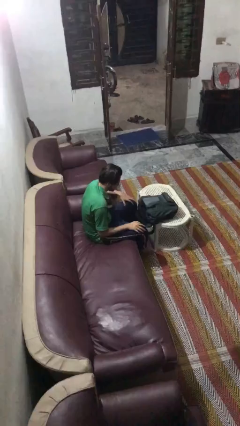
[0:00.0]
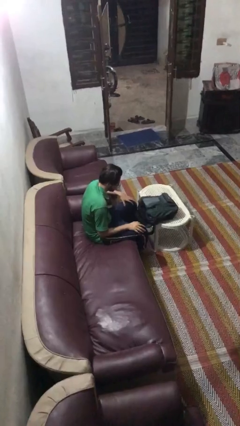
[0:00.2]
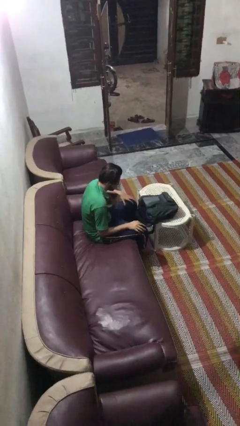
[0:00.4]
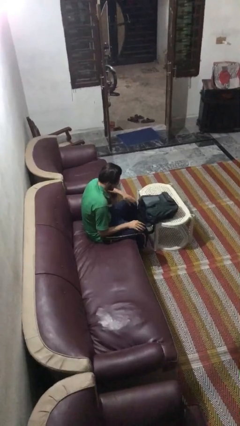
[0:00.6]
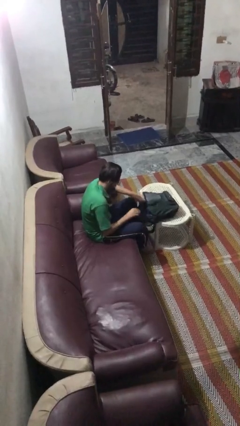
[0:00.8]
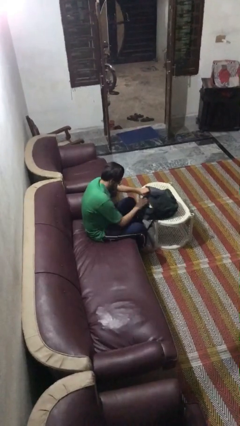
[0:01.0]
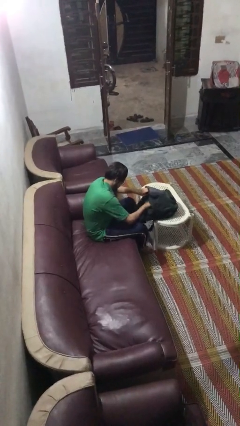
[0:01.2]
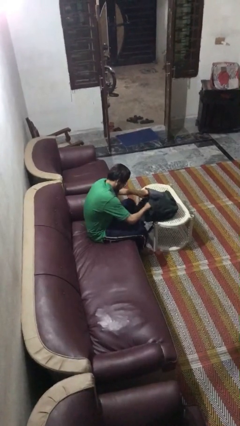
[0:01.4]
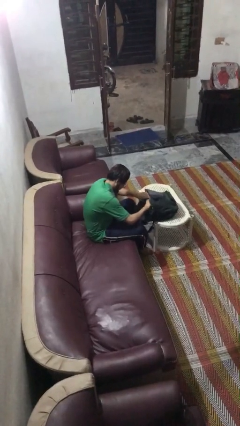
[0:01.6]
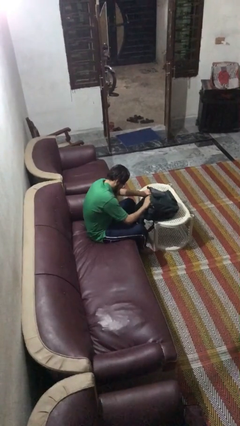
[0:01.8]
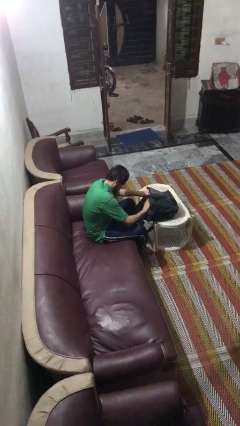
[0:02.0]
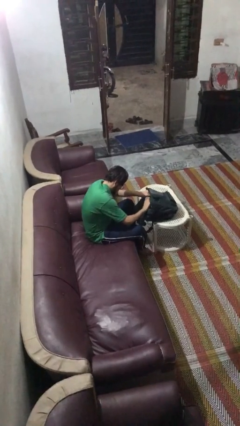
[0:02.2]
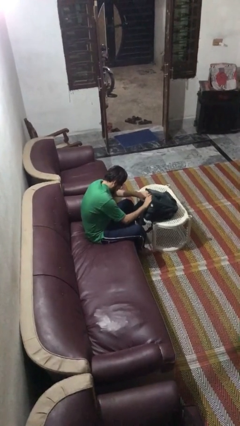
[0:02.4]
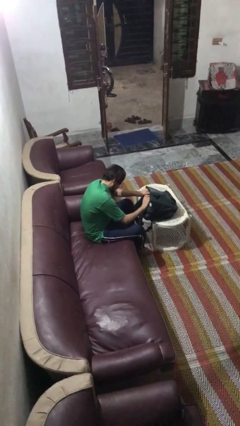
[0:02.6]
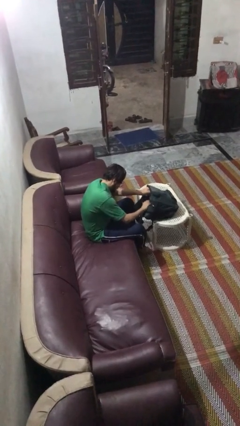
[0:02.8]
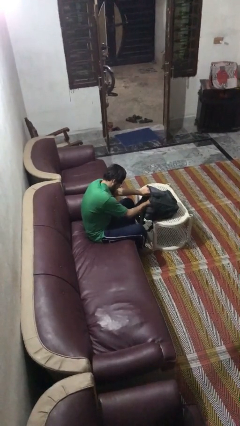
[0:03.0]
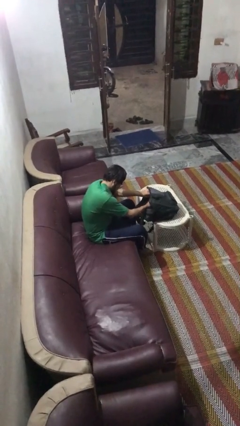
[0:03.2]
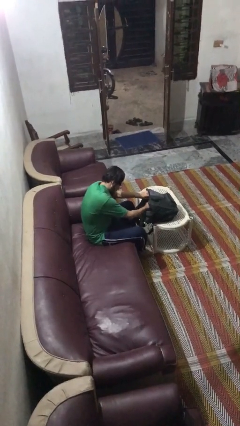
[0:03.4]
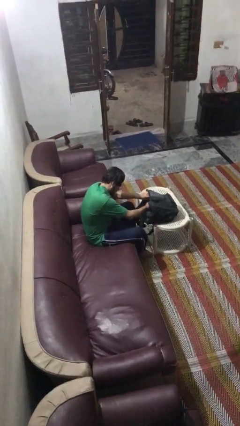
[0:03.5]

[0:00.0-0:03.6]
person searches in backpack

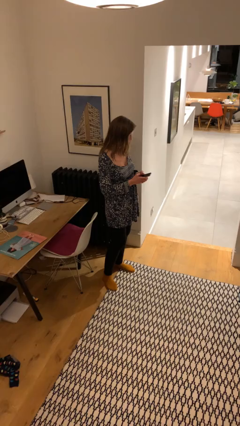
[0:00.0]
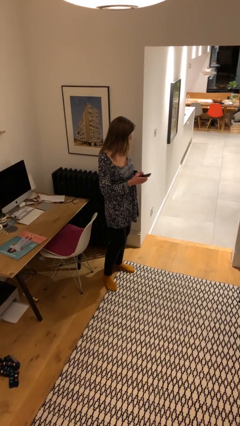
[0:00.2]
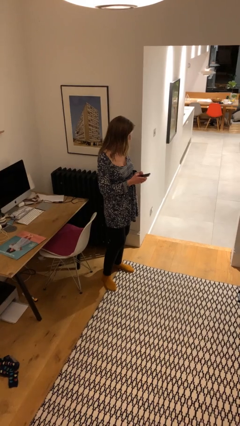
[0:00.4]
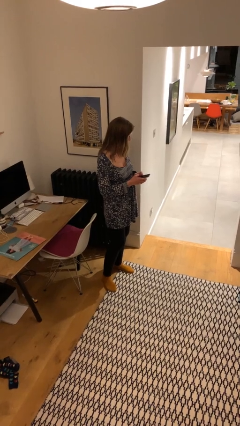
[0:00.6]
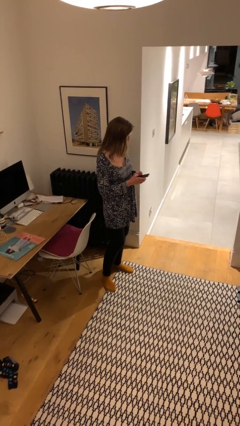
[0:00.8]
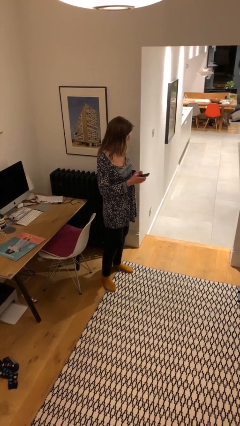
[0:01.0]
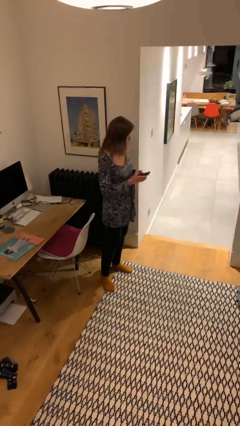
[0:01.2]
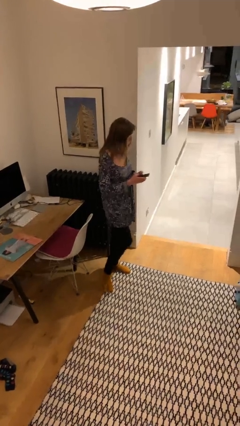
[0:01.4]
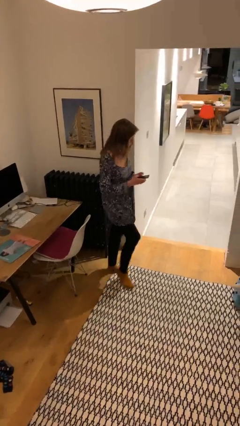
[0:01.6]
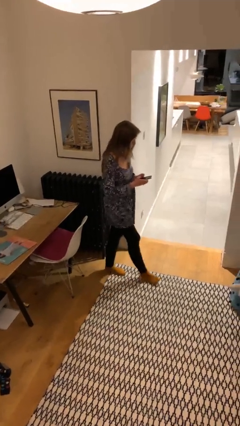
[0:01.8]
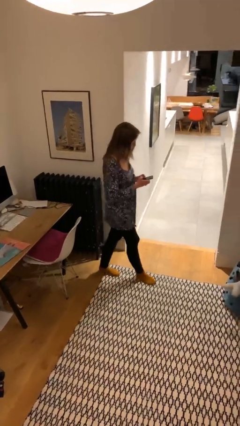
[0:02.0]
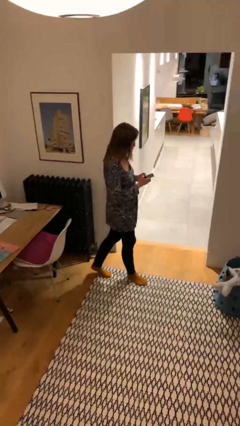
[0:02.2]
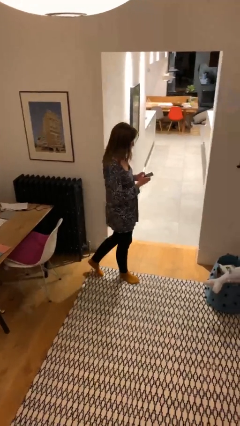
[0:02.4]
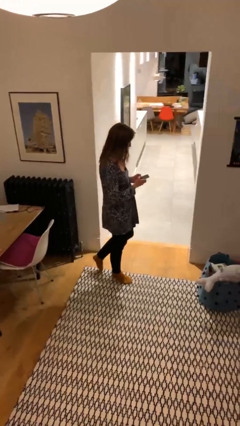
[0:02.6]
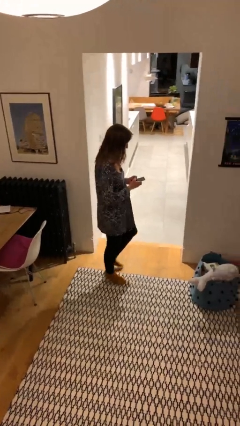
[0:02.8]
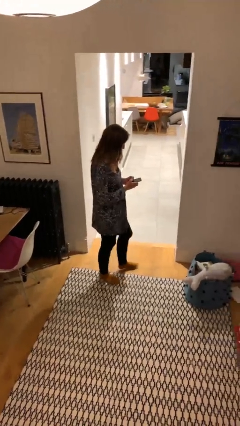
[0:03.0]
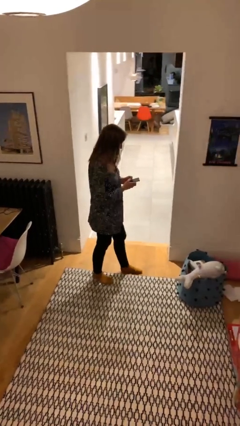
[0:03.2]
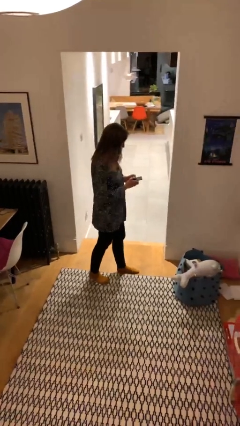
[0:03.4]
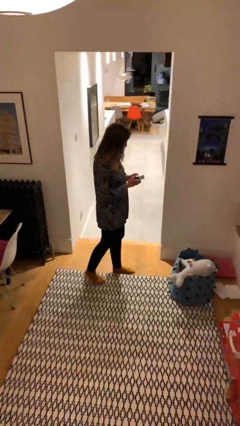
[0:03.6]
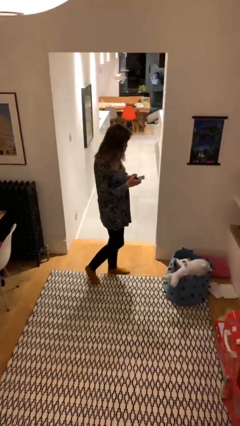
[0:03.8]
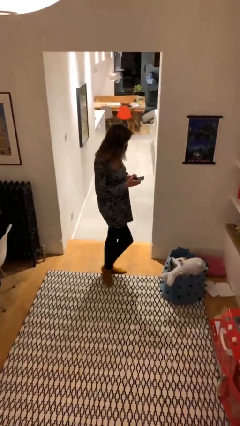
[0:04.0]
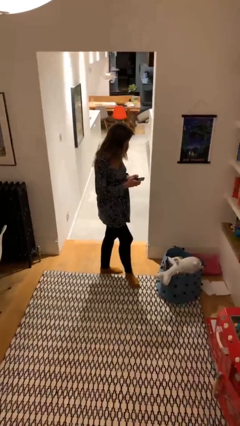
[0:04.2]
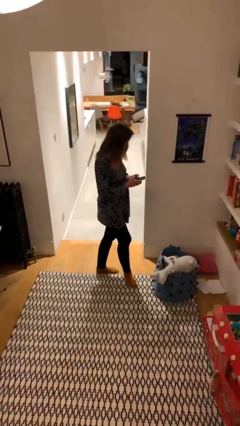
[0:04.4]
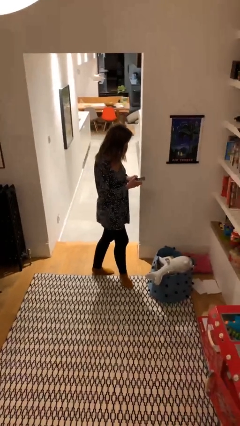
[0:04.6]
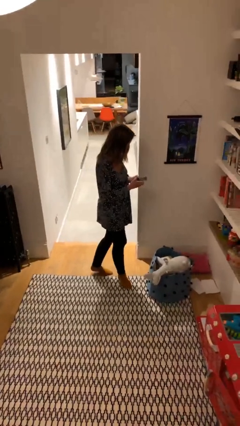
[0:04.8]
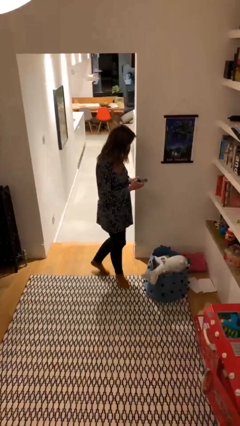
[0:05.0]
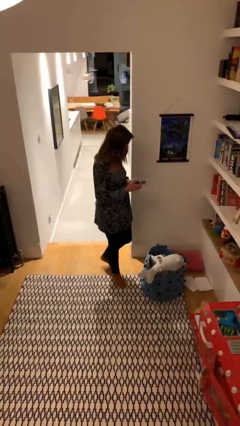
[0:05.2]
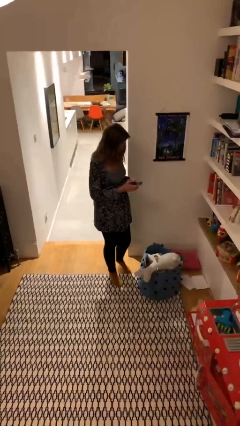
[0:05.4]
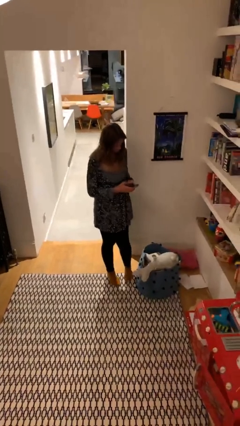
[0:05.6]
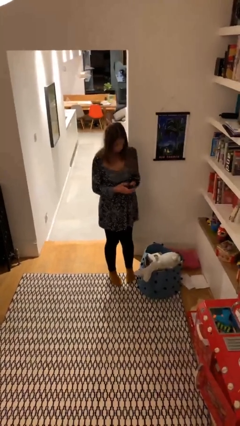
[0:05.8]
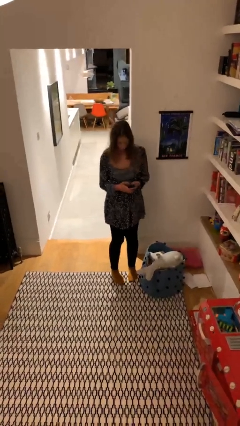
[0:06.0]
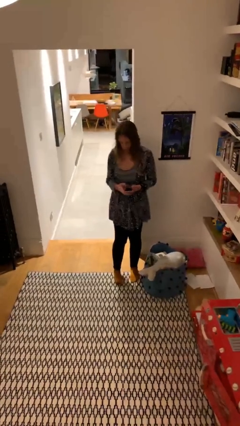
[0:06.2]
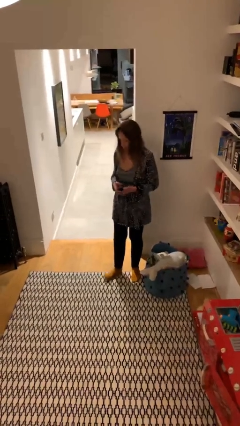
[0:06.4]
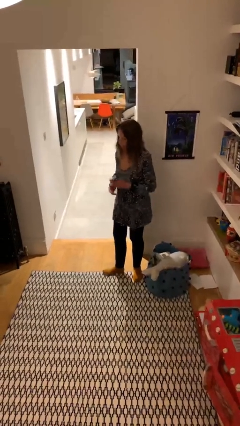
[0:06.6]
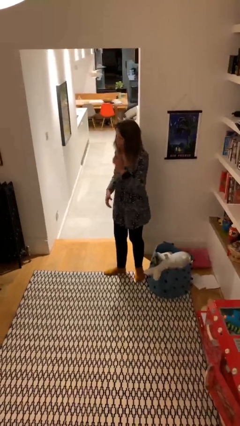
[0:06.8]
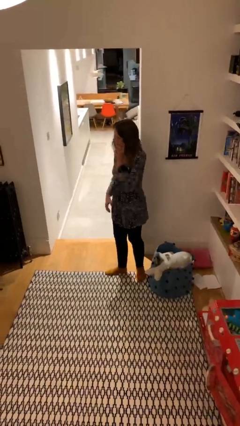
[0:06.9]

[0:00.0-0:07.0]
person texts on phone

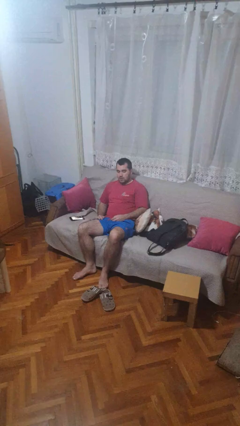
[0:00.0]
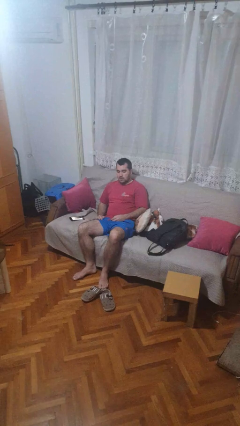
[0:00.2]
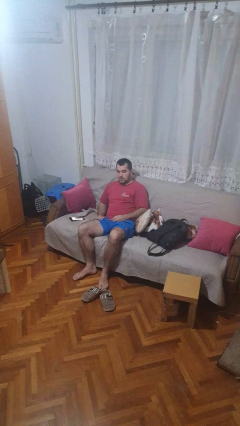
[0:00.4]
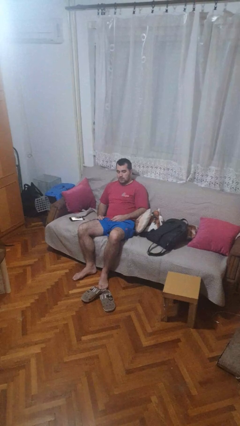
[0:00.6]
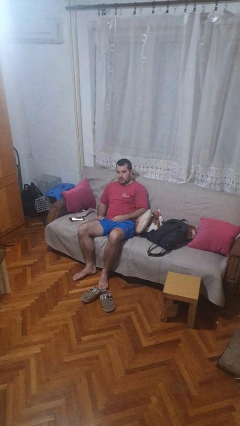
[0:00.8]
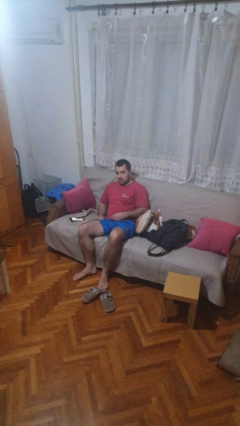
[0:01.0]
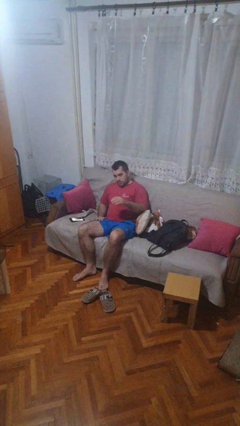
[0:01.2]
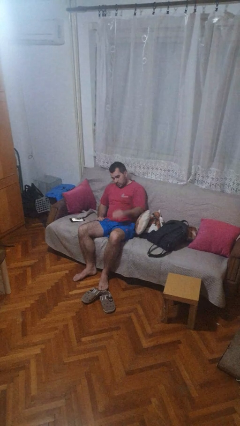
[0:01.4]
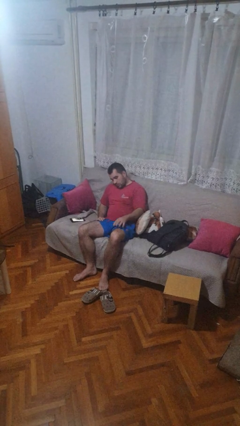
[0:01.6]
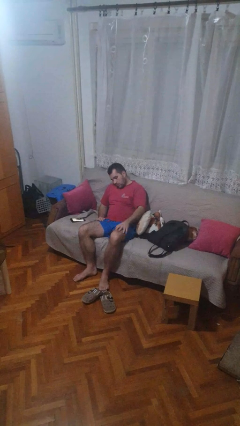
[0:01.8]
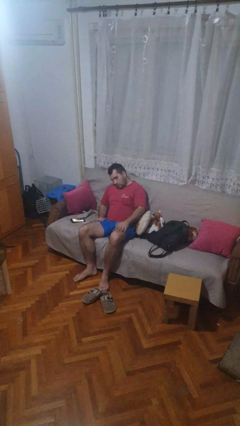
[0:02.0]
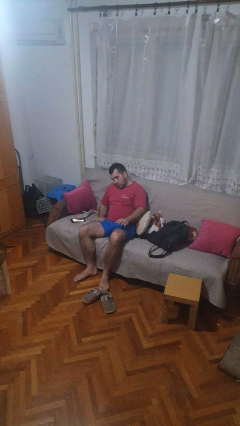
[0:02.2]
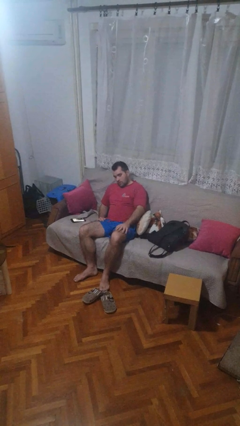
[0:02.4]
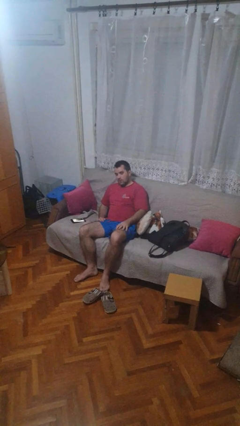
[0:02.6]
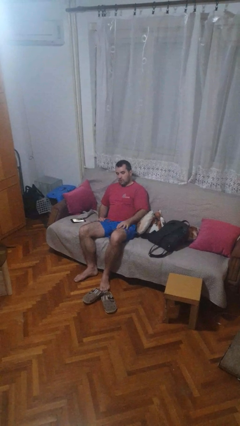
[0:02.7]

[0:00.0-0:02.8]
person slaps hands on thighs

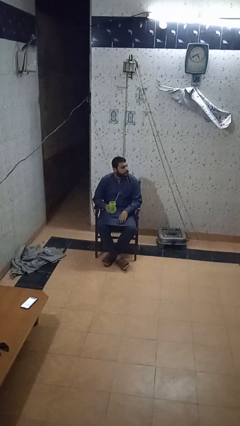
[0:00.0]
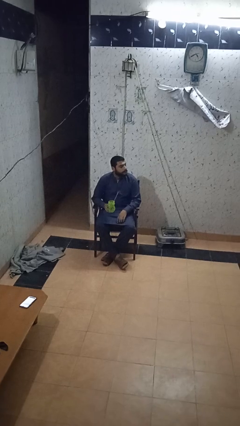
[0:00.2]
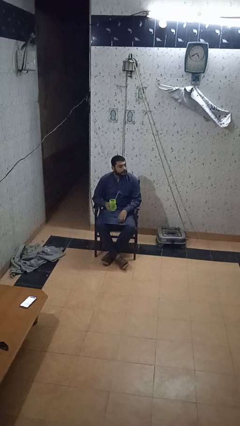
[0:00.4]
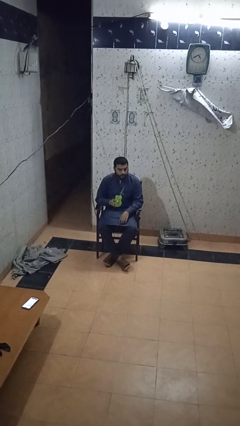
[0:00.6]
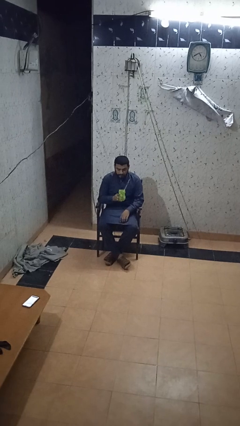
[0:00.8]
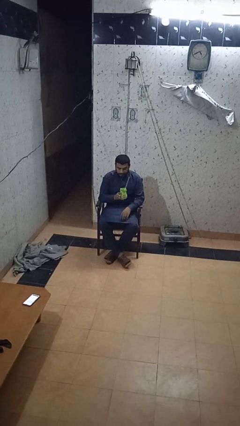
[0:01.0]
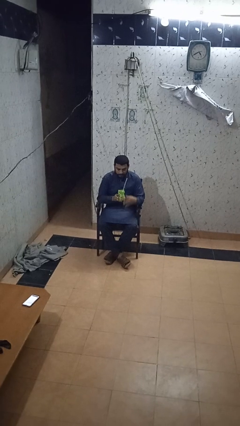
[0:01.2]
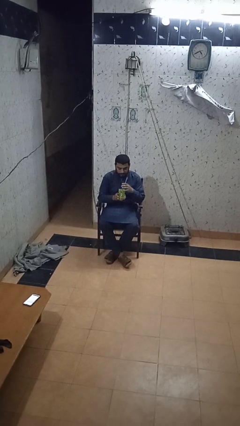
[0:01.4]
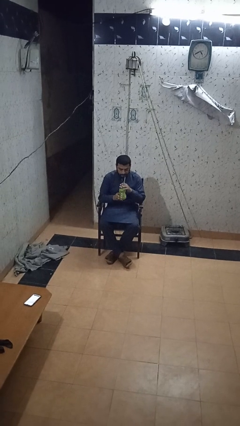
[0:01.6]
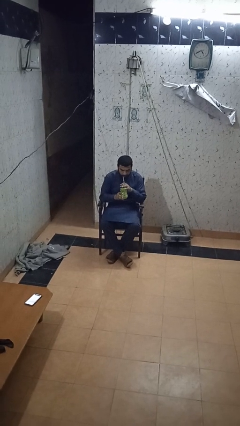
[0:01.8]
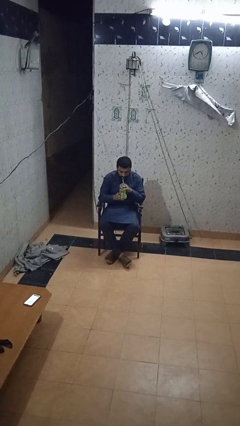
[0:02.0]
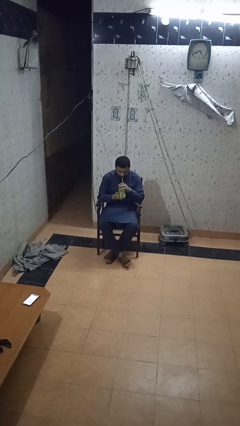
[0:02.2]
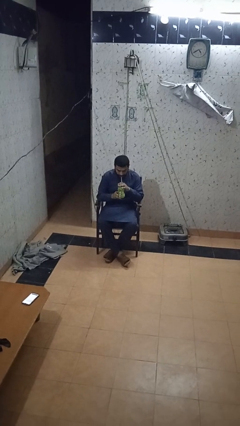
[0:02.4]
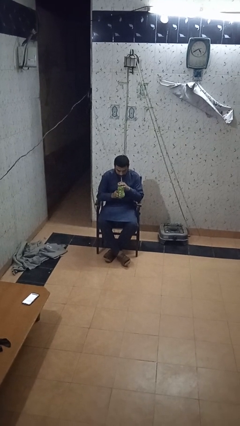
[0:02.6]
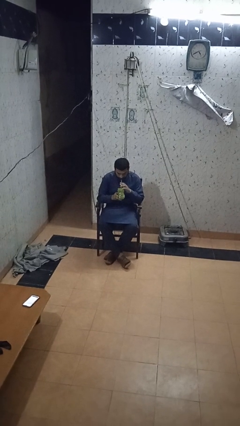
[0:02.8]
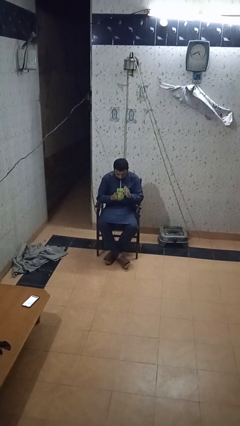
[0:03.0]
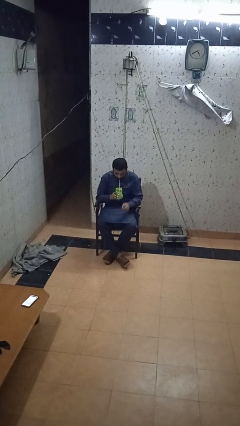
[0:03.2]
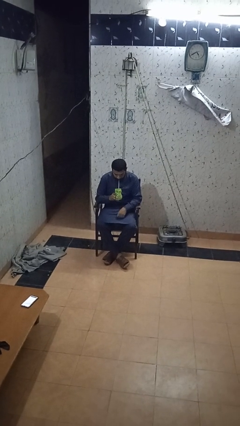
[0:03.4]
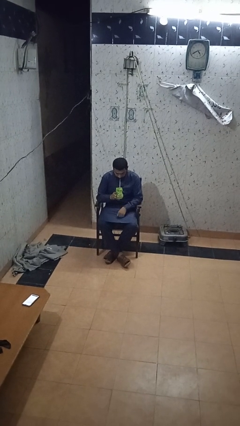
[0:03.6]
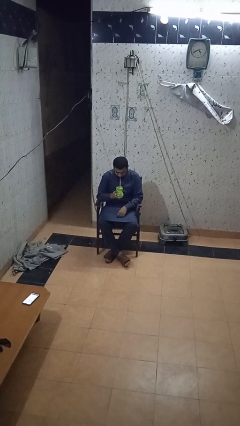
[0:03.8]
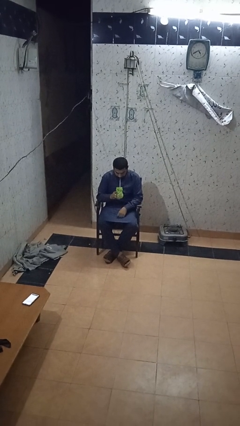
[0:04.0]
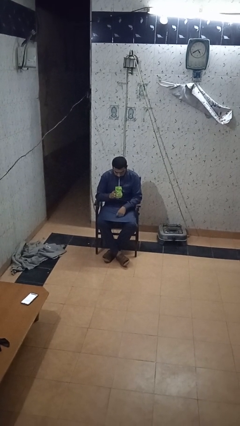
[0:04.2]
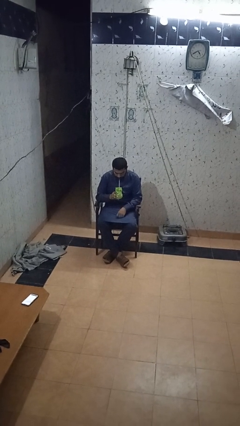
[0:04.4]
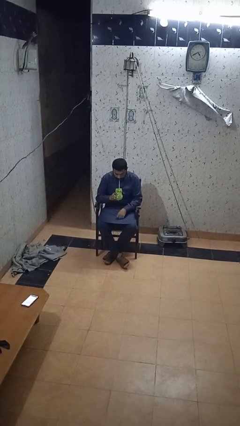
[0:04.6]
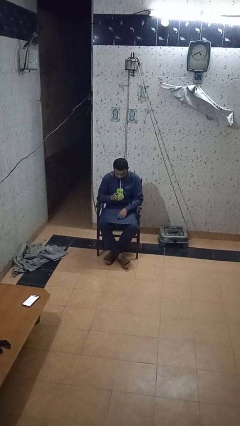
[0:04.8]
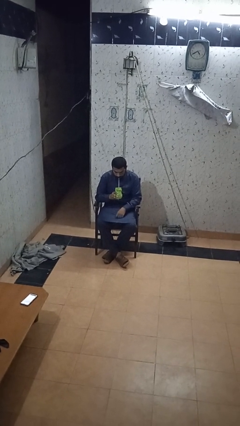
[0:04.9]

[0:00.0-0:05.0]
person drinks from straw
